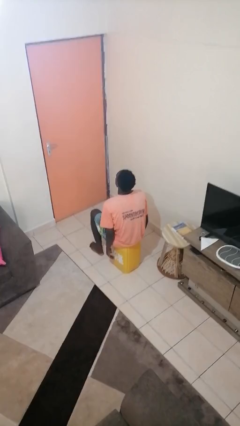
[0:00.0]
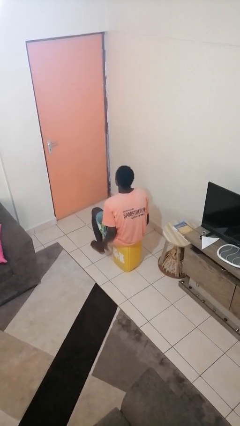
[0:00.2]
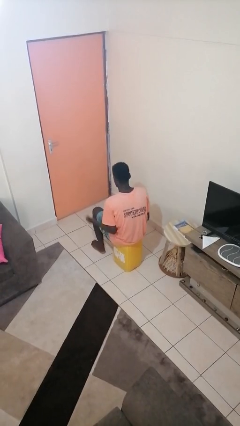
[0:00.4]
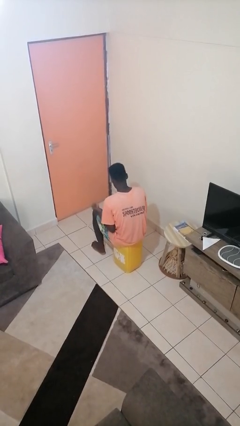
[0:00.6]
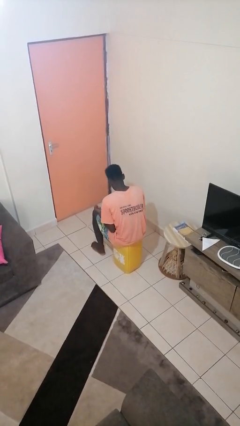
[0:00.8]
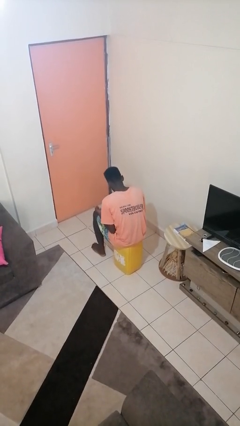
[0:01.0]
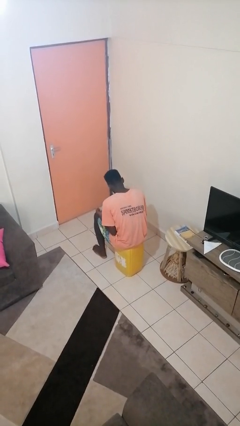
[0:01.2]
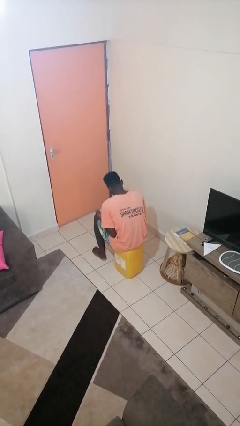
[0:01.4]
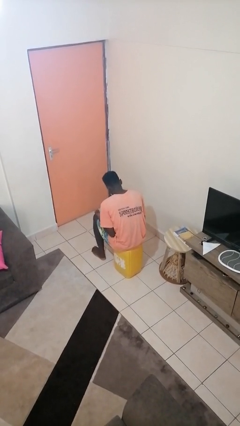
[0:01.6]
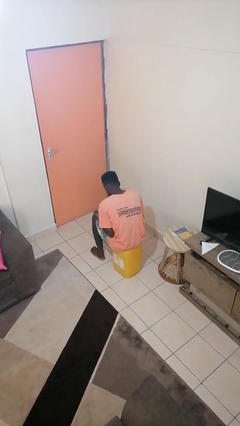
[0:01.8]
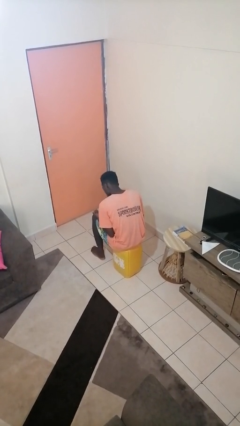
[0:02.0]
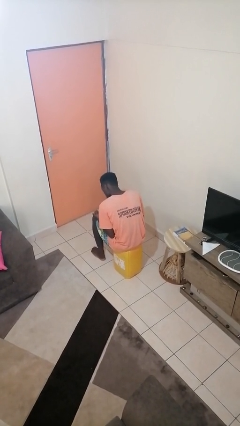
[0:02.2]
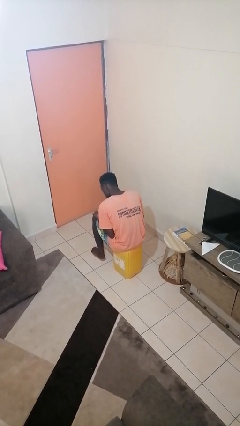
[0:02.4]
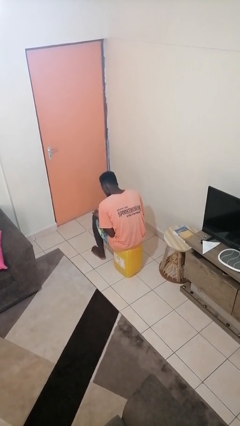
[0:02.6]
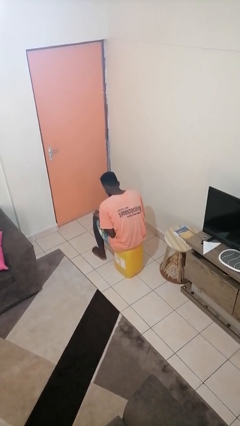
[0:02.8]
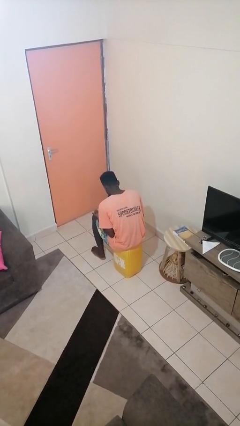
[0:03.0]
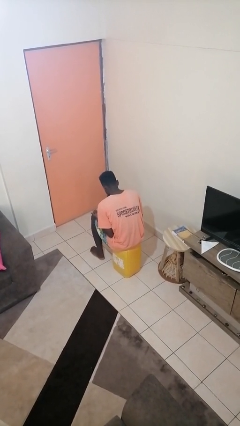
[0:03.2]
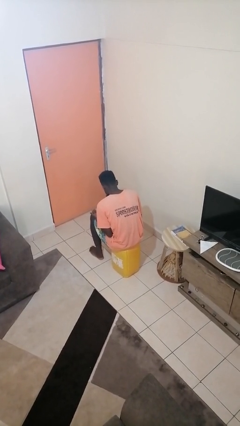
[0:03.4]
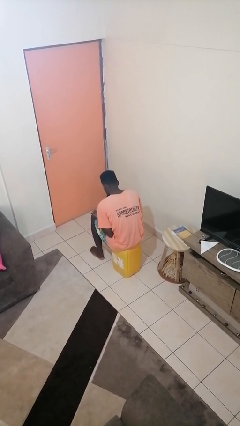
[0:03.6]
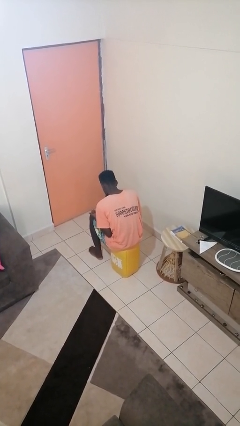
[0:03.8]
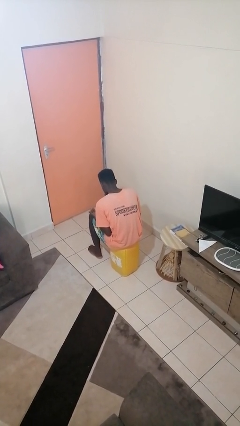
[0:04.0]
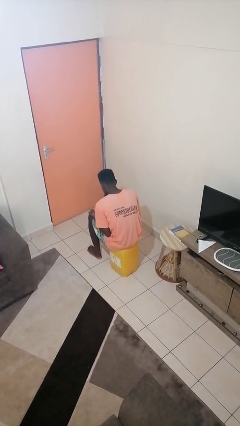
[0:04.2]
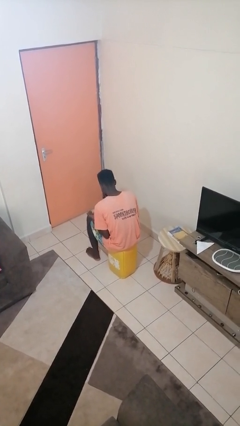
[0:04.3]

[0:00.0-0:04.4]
person looks at hands in lap

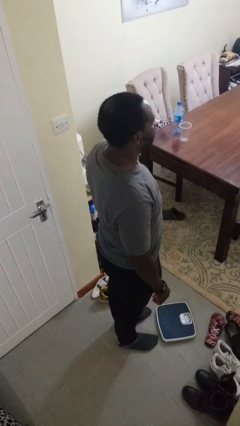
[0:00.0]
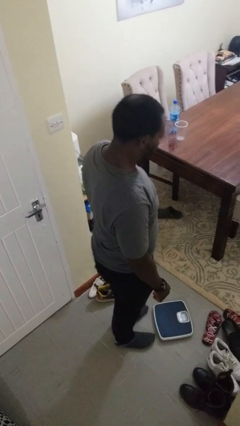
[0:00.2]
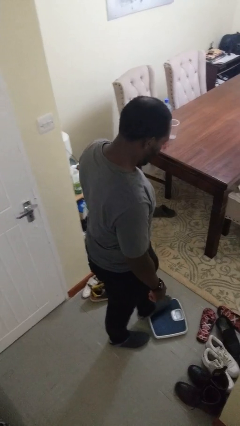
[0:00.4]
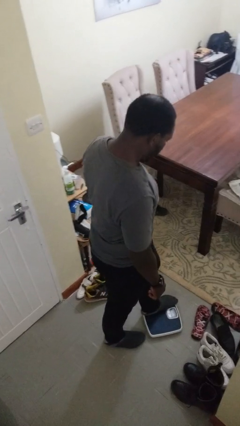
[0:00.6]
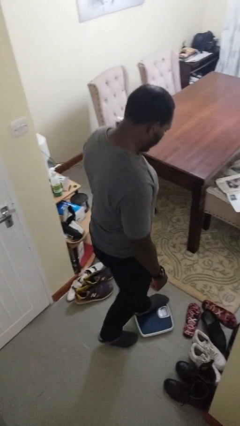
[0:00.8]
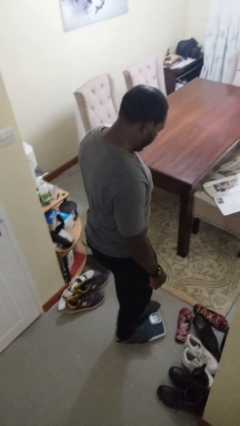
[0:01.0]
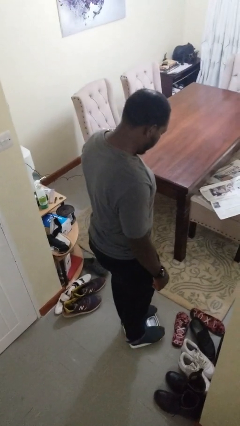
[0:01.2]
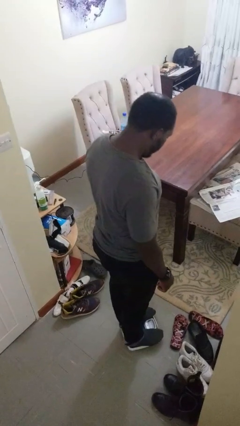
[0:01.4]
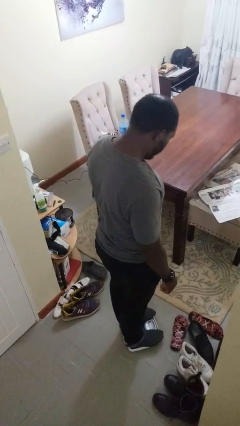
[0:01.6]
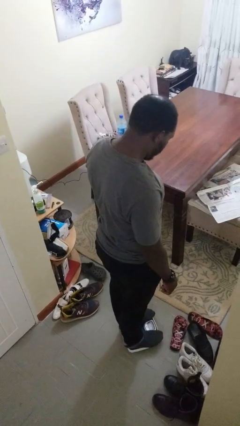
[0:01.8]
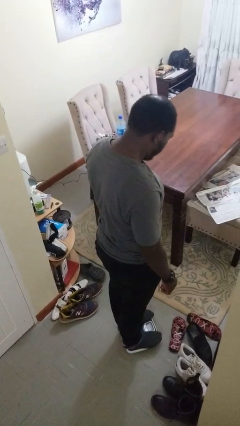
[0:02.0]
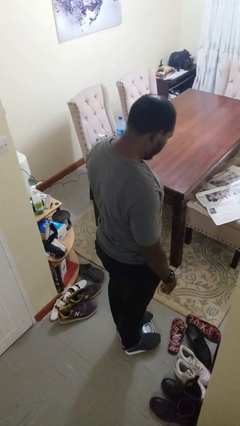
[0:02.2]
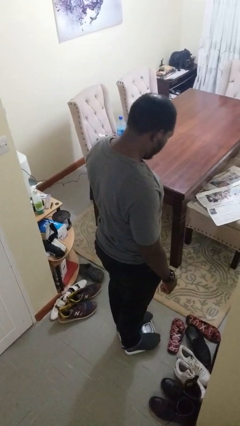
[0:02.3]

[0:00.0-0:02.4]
person uses bodyweight scale

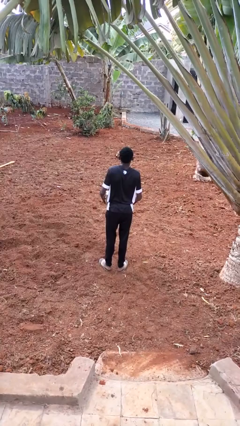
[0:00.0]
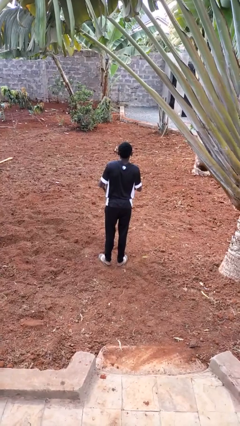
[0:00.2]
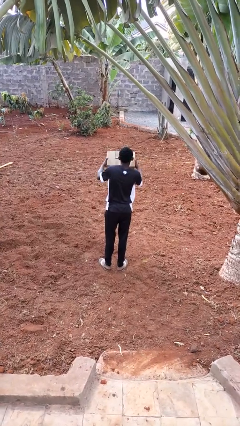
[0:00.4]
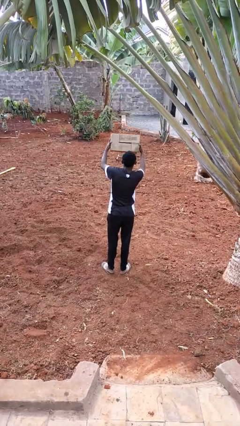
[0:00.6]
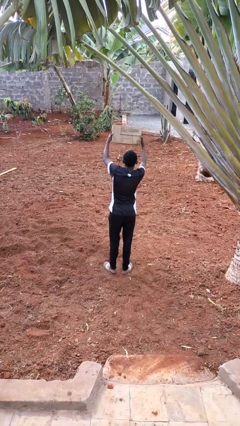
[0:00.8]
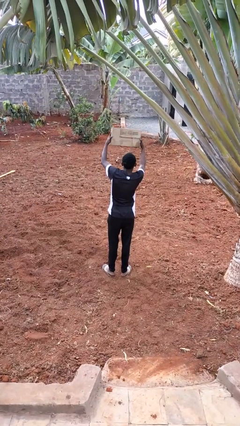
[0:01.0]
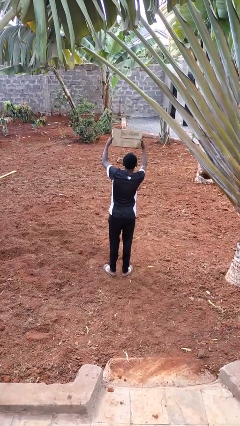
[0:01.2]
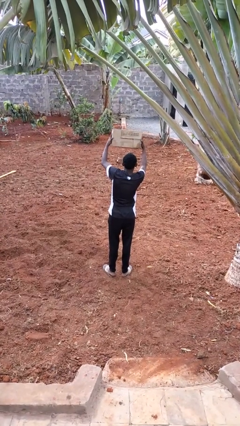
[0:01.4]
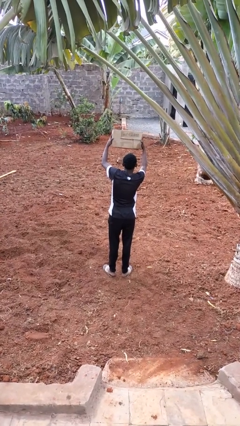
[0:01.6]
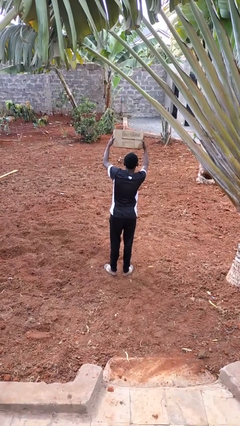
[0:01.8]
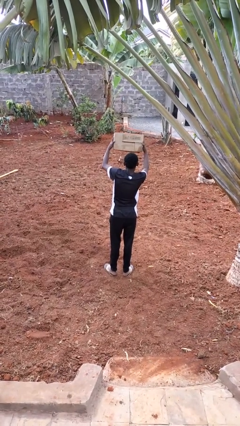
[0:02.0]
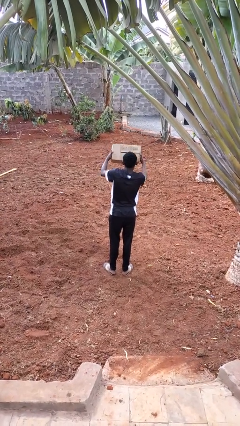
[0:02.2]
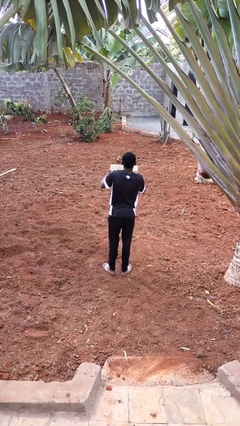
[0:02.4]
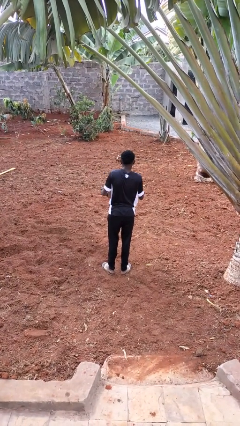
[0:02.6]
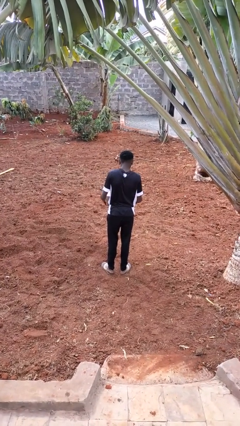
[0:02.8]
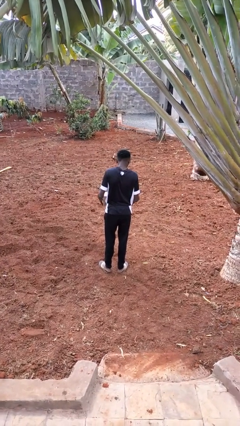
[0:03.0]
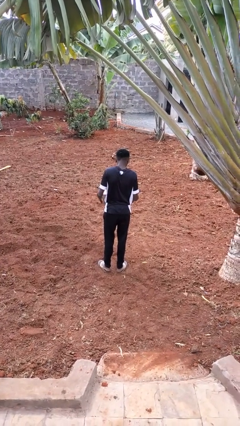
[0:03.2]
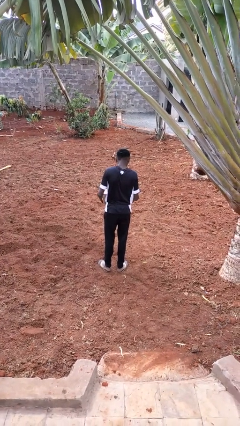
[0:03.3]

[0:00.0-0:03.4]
person holds object above head

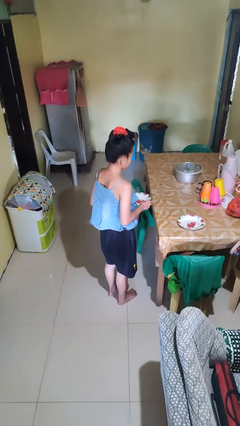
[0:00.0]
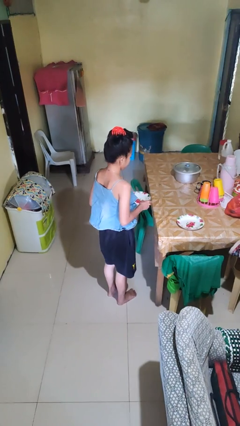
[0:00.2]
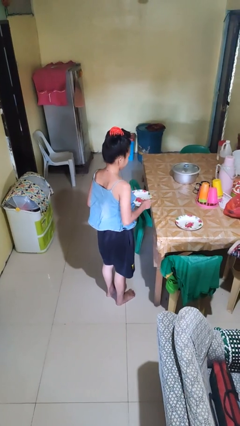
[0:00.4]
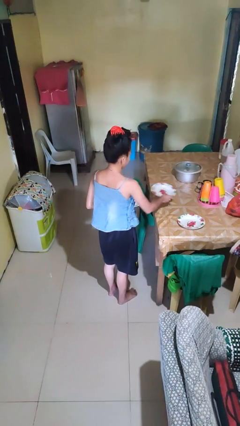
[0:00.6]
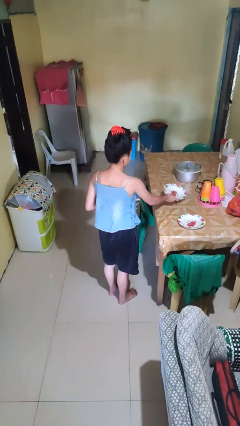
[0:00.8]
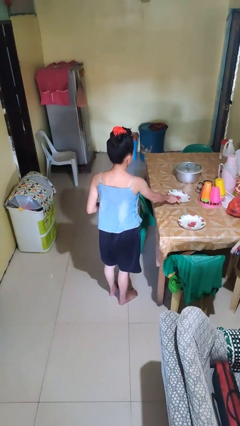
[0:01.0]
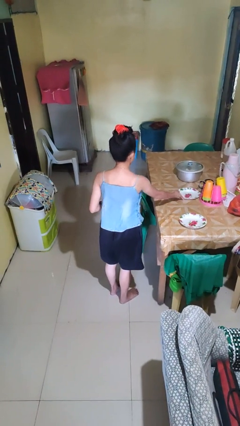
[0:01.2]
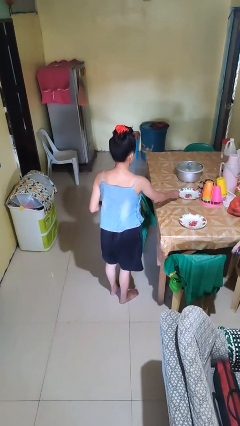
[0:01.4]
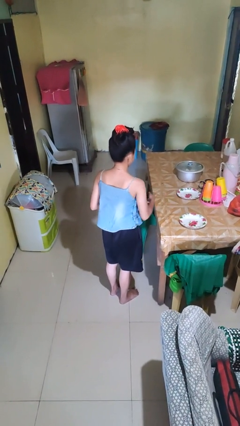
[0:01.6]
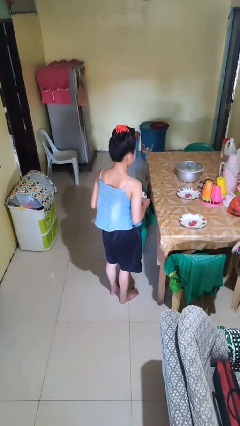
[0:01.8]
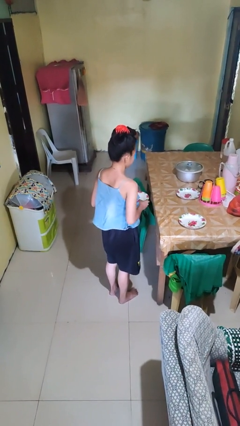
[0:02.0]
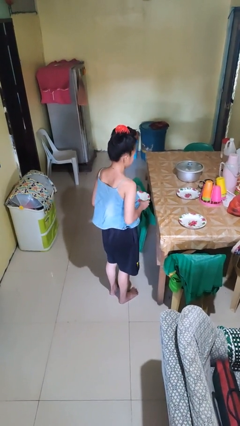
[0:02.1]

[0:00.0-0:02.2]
person sets table

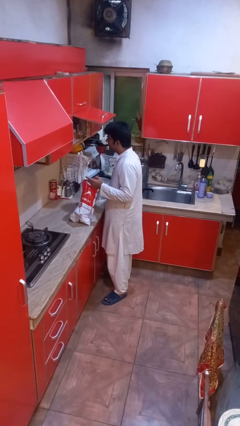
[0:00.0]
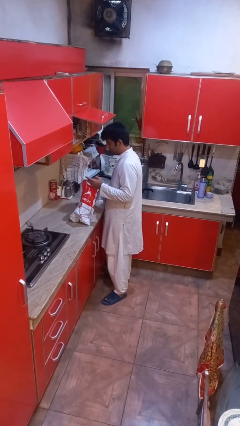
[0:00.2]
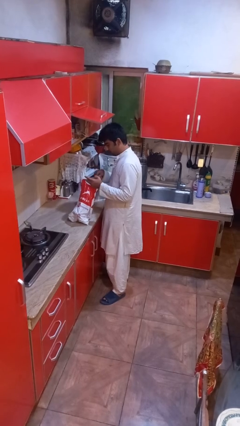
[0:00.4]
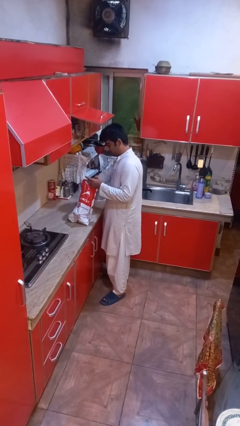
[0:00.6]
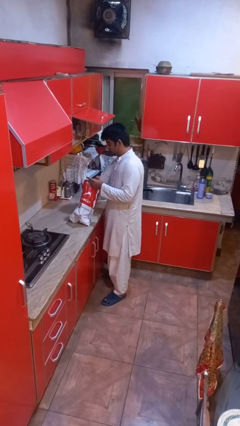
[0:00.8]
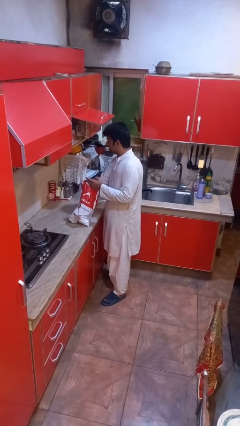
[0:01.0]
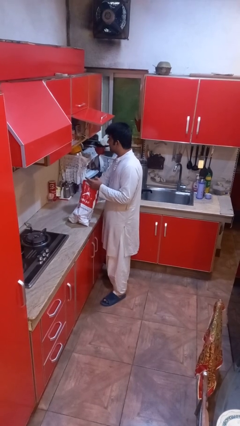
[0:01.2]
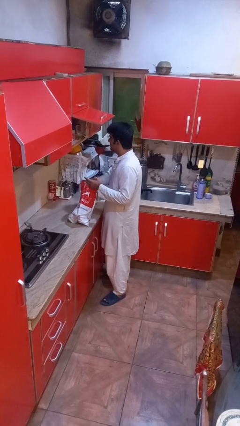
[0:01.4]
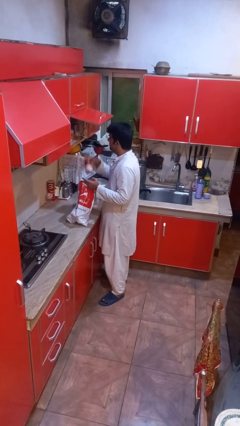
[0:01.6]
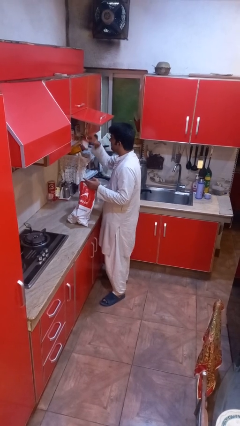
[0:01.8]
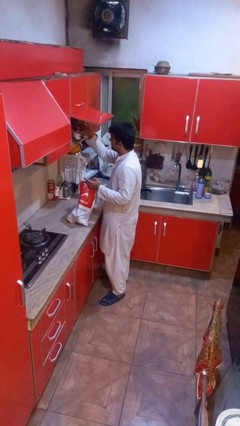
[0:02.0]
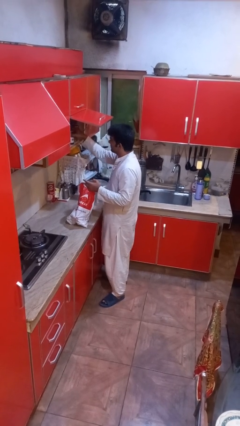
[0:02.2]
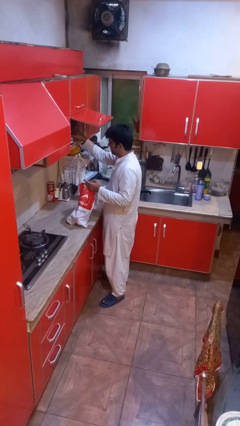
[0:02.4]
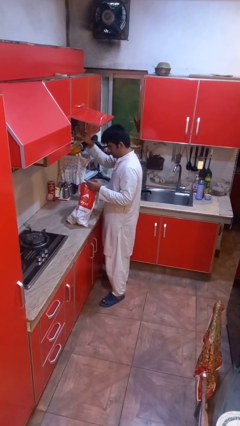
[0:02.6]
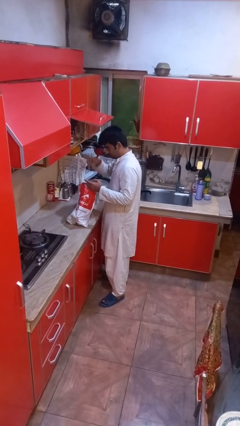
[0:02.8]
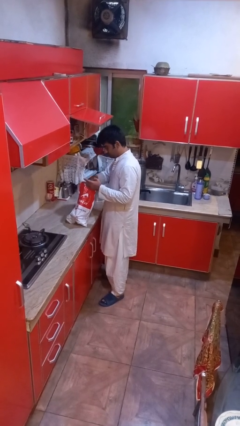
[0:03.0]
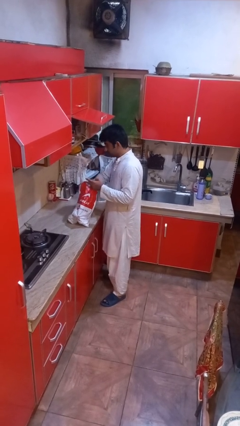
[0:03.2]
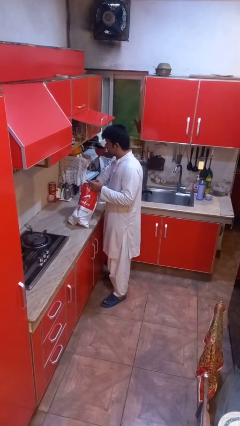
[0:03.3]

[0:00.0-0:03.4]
person loads groceries into cabinet

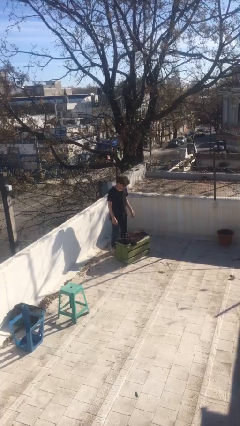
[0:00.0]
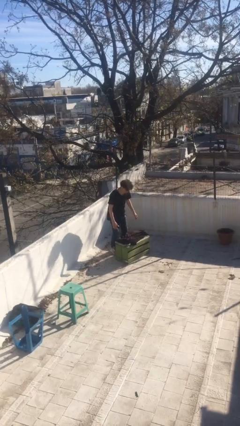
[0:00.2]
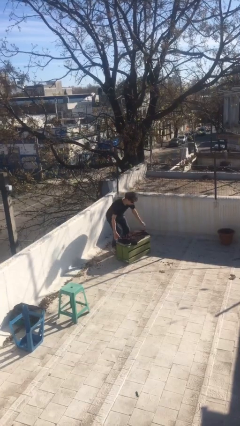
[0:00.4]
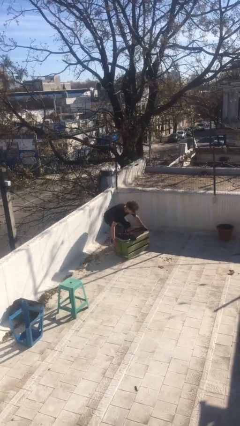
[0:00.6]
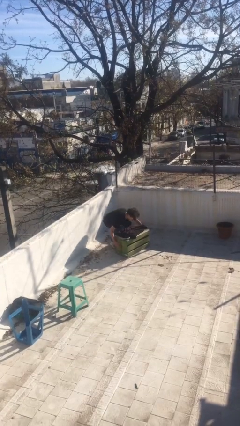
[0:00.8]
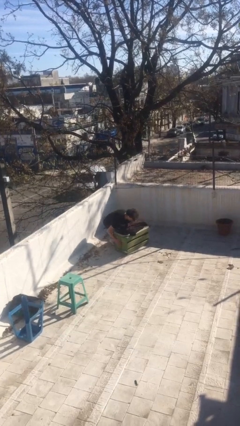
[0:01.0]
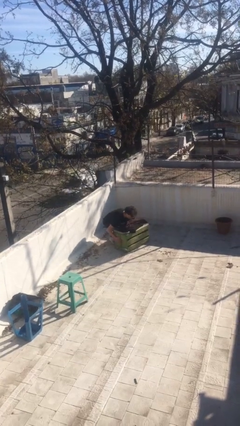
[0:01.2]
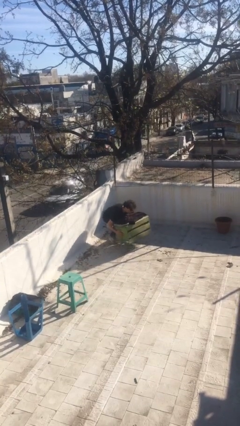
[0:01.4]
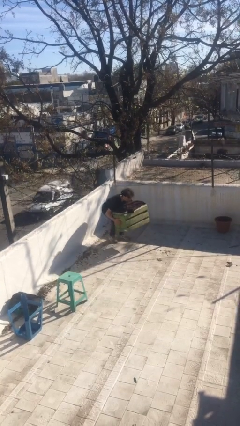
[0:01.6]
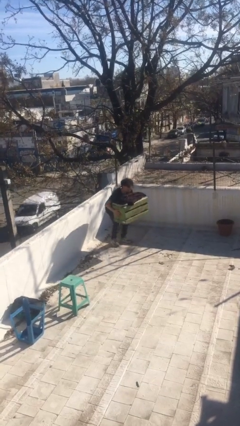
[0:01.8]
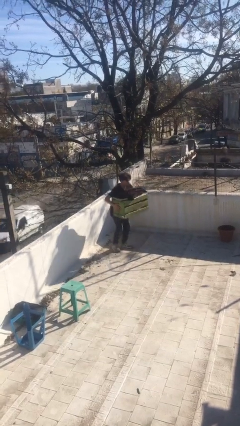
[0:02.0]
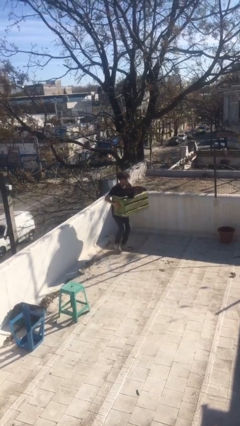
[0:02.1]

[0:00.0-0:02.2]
person picks up object from floor
